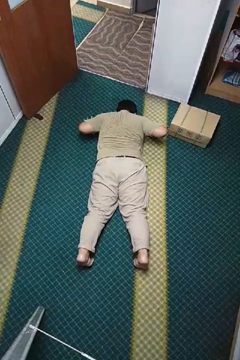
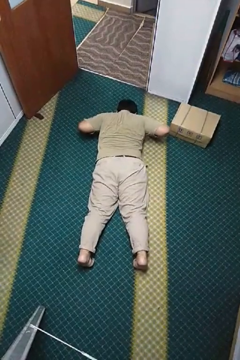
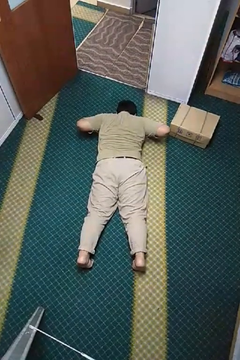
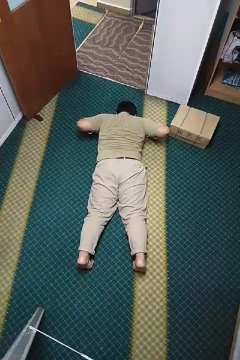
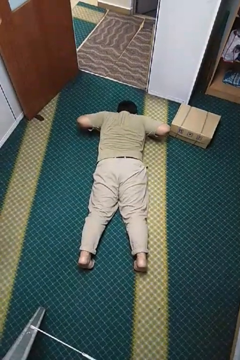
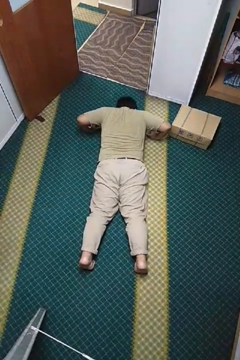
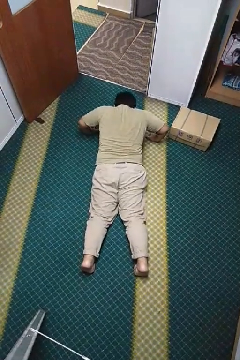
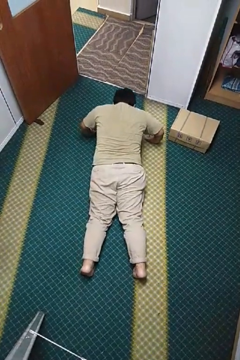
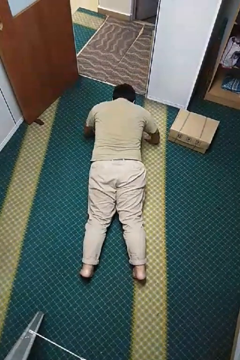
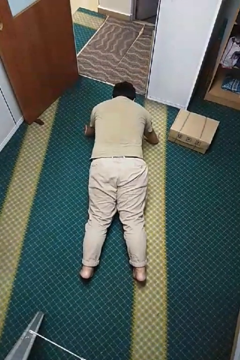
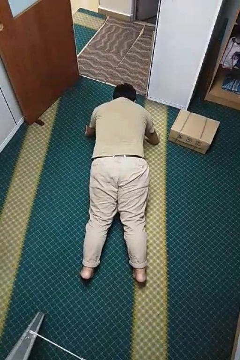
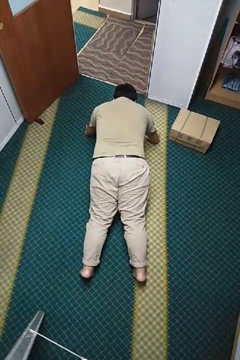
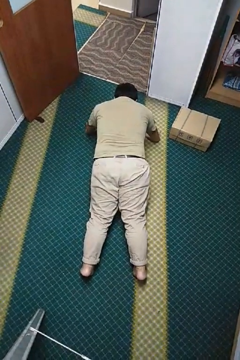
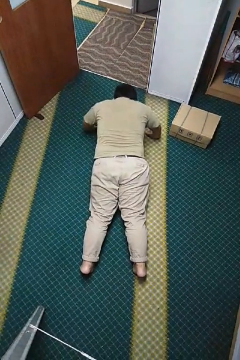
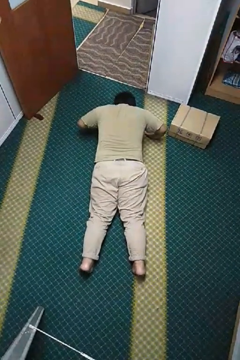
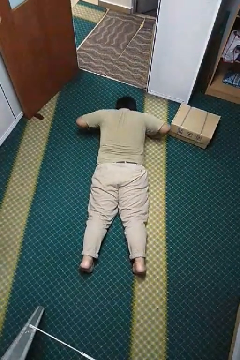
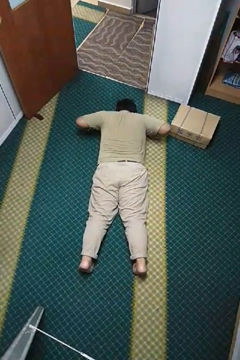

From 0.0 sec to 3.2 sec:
person exercises with pushup

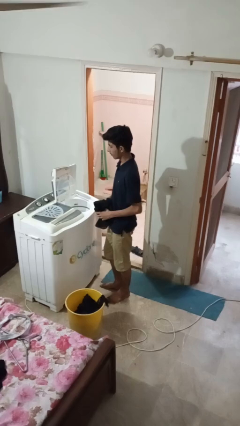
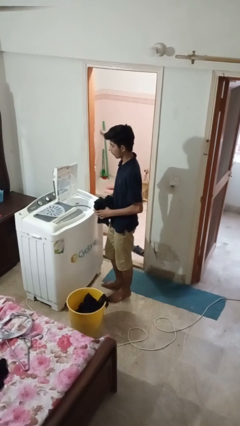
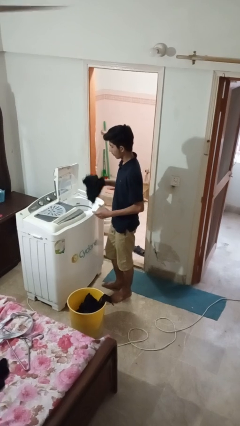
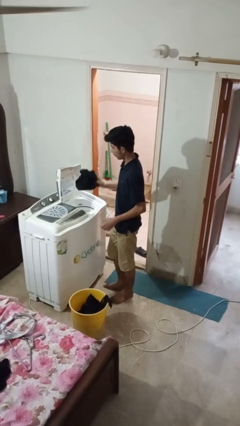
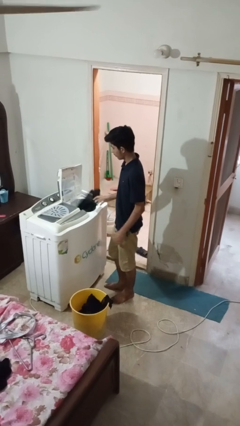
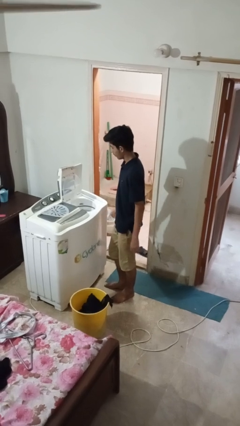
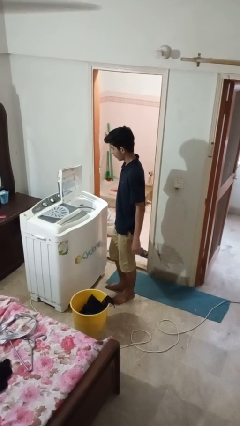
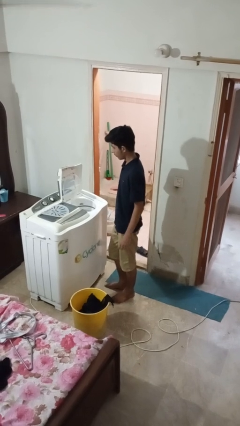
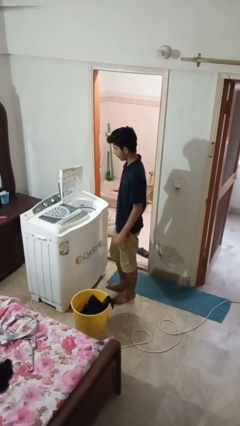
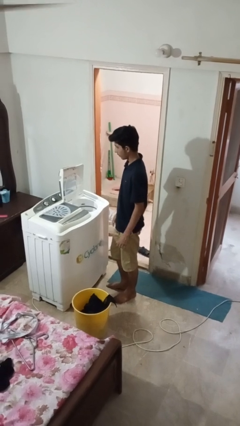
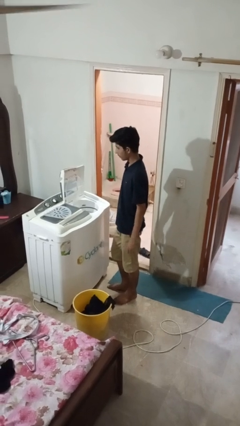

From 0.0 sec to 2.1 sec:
person loads dryer

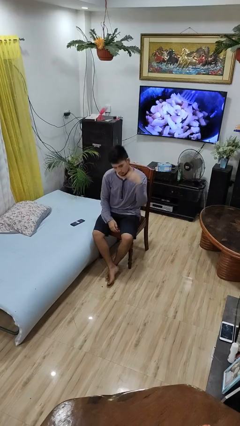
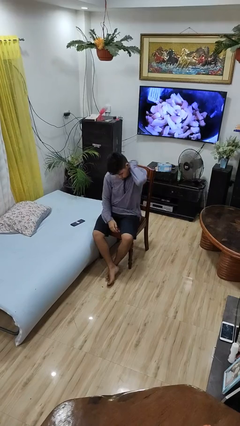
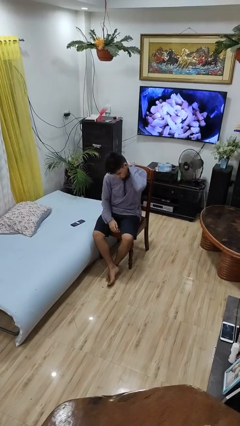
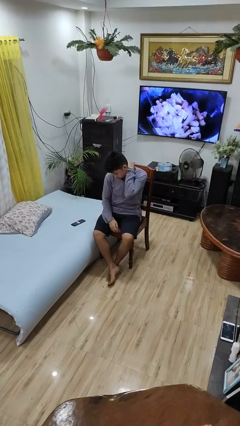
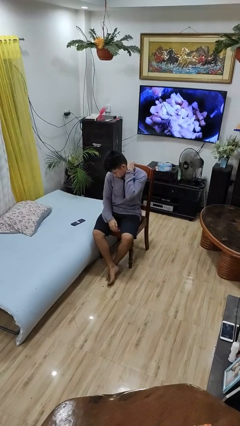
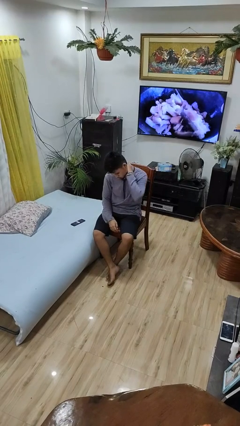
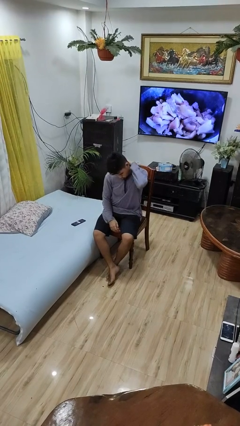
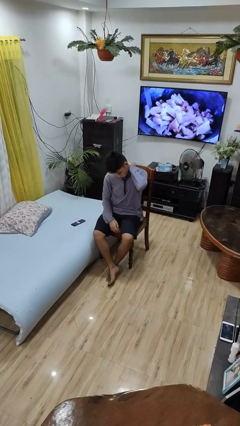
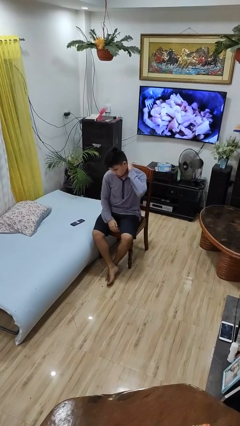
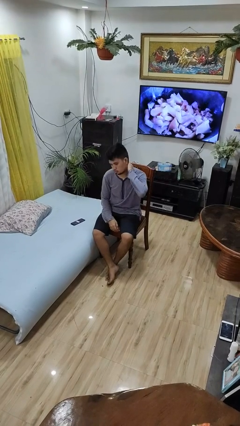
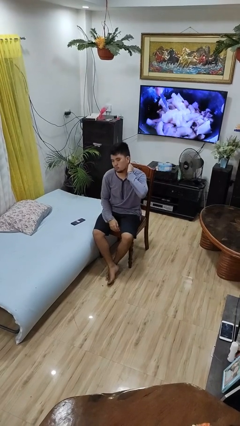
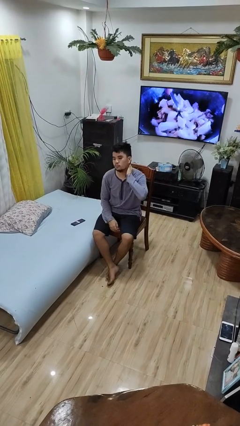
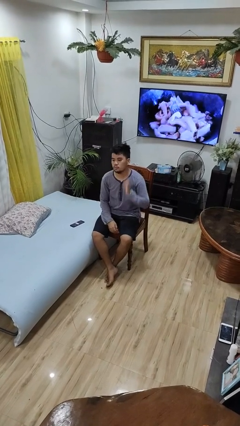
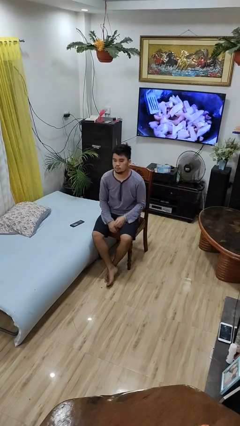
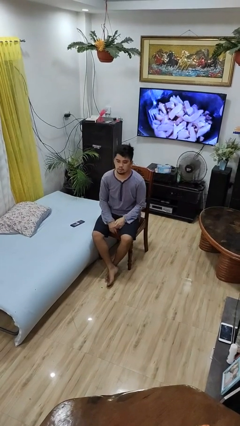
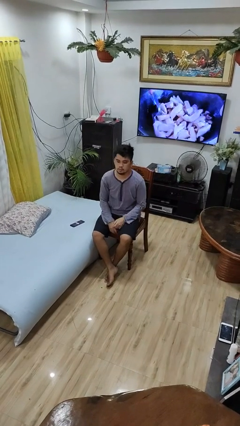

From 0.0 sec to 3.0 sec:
person rubs neck

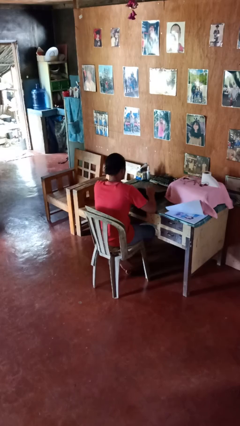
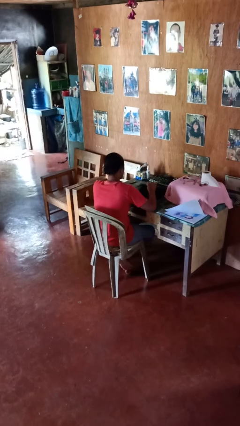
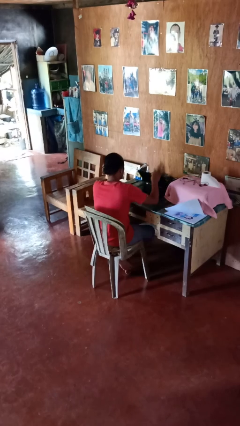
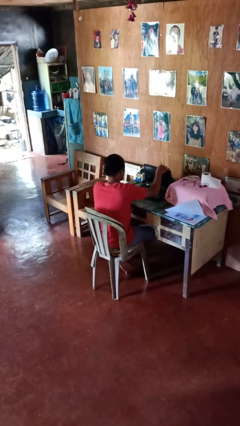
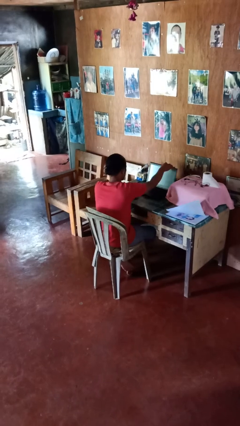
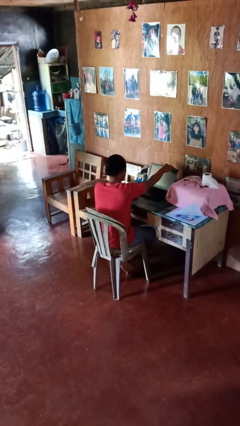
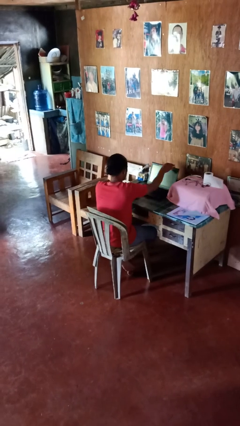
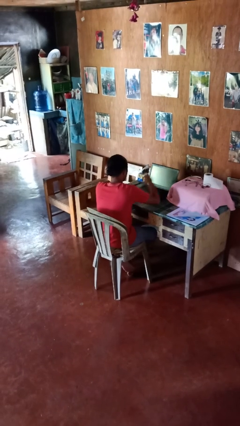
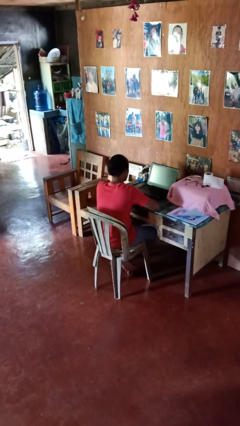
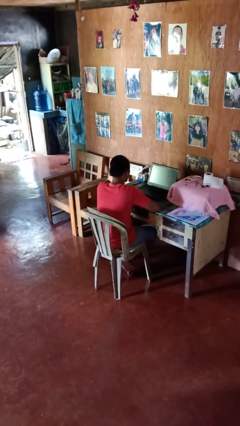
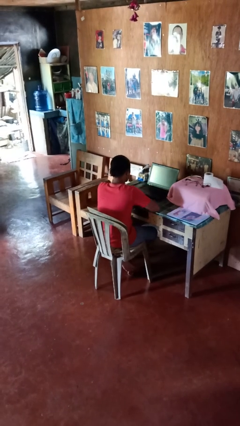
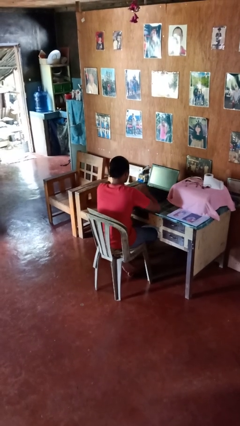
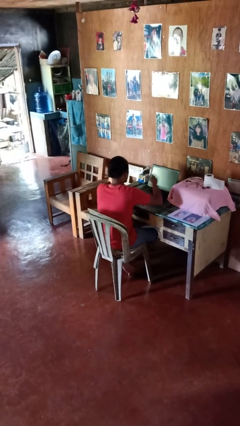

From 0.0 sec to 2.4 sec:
person opens laptop

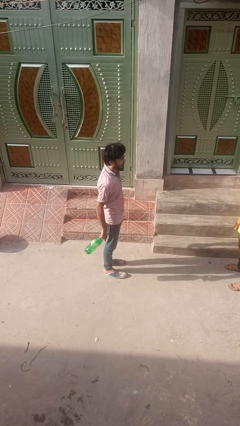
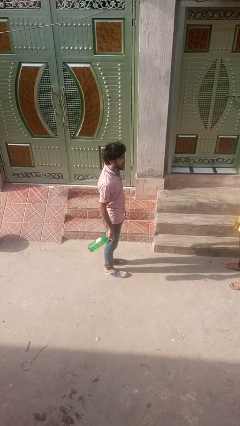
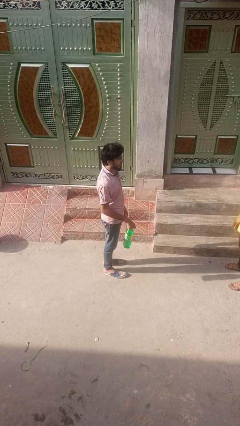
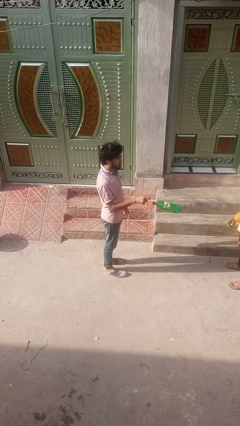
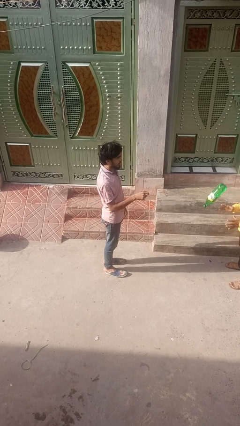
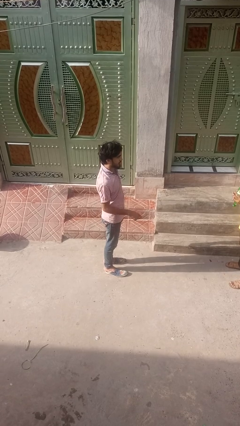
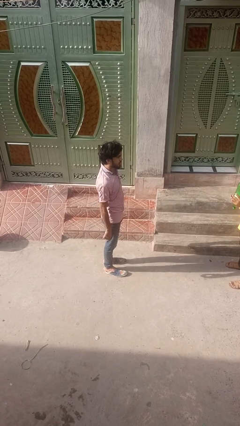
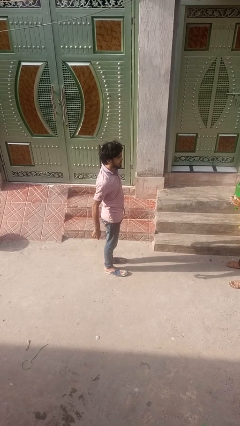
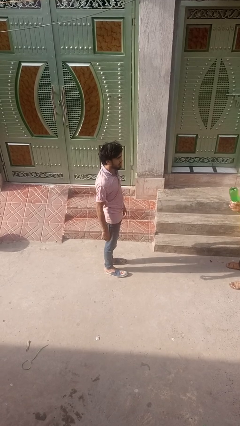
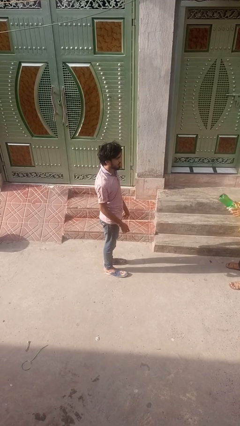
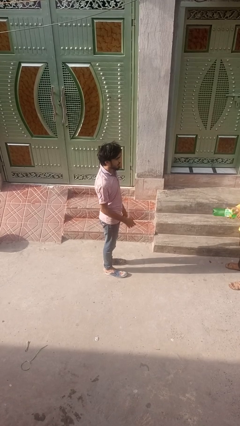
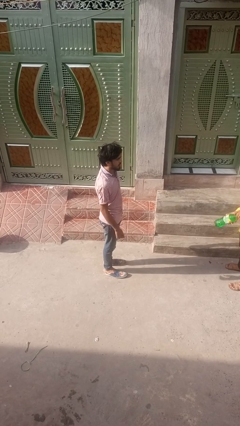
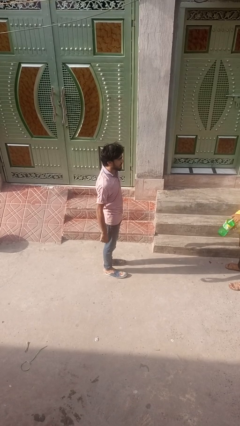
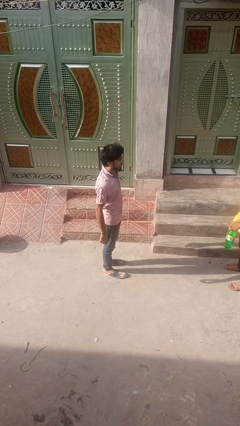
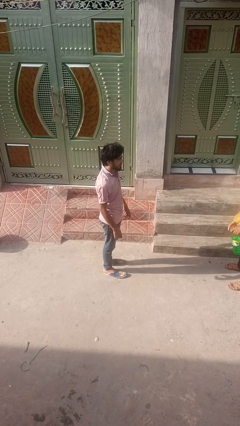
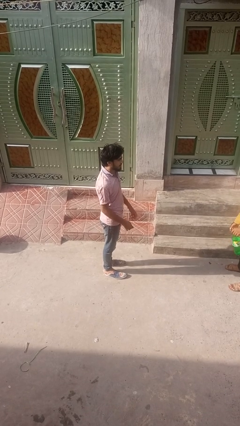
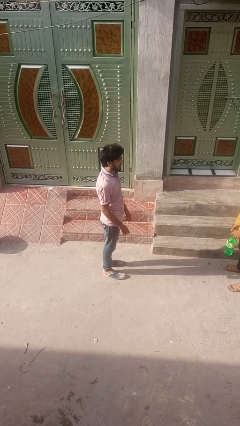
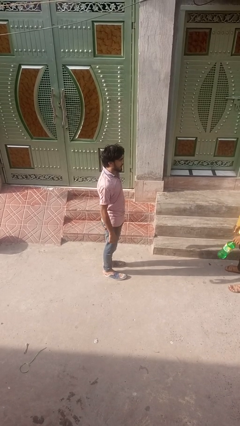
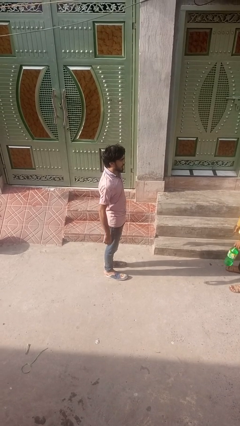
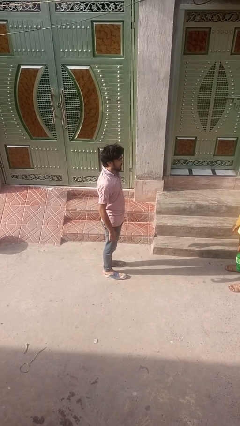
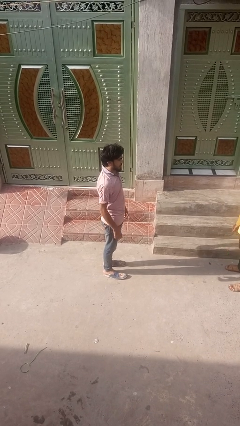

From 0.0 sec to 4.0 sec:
person throws object to person

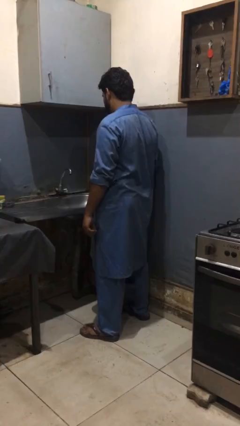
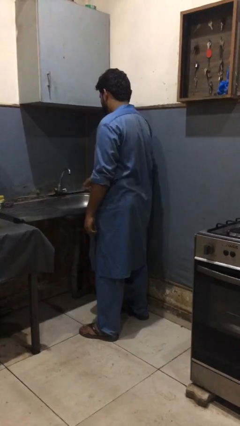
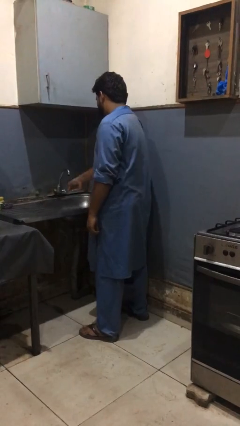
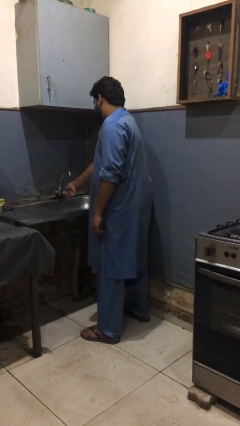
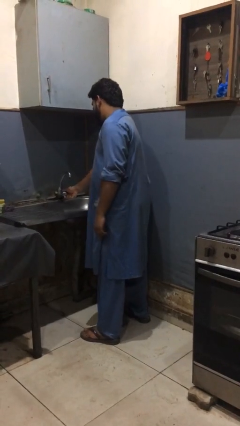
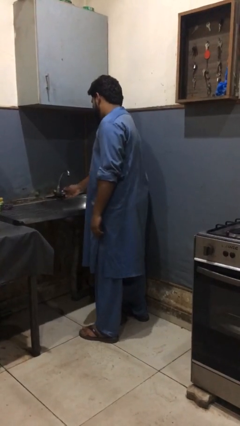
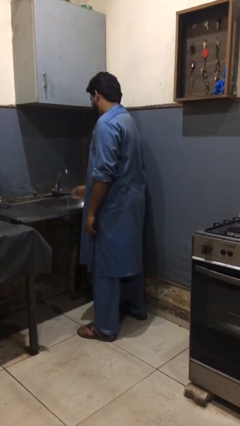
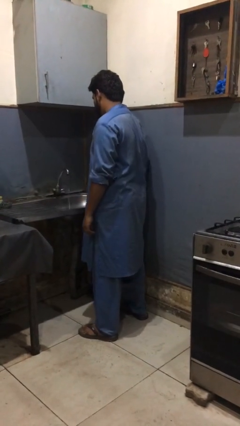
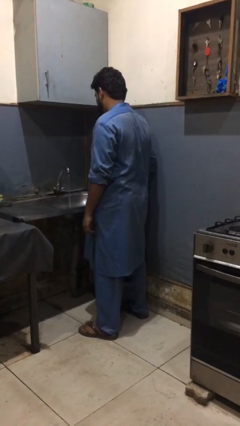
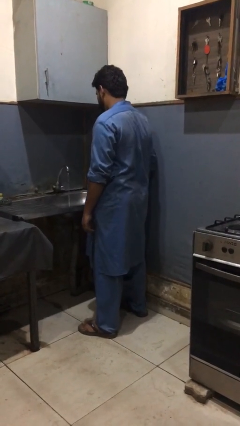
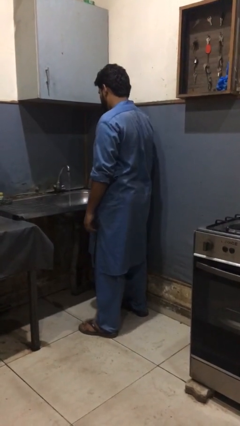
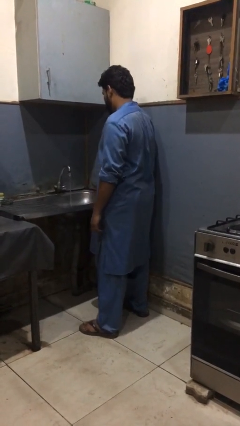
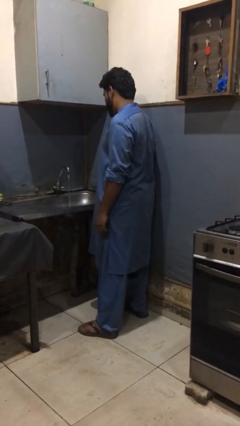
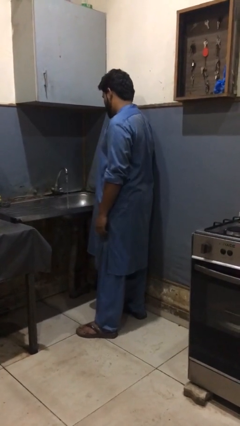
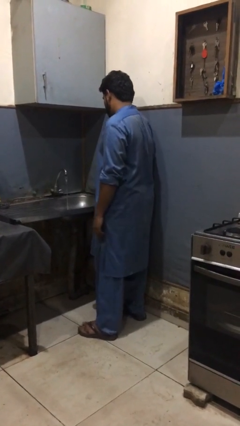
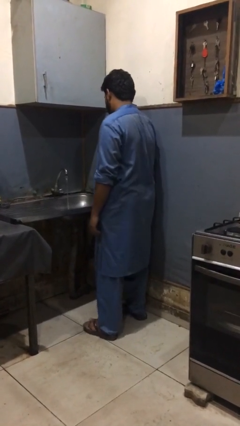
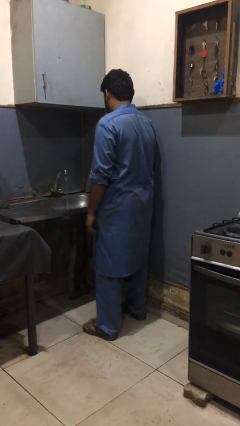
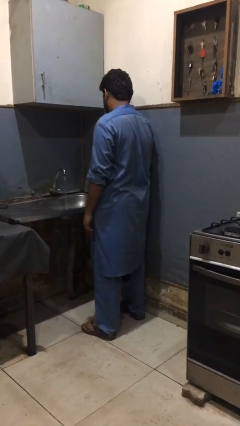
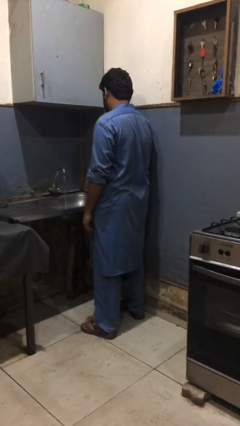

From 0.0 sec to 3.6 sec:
person turns off faucet
